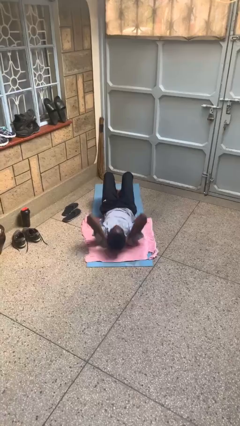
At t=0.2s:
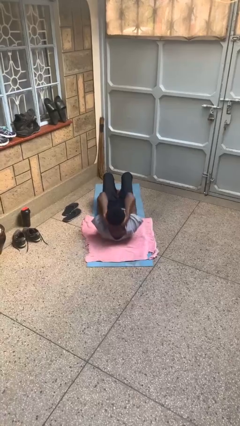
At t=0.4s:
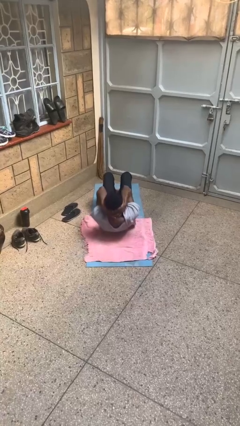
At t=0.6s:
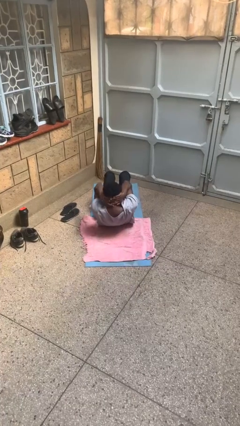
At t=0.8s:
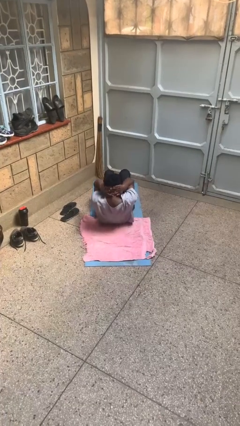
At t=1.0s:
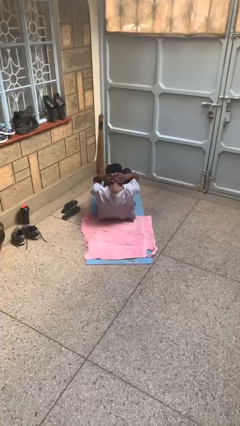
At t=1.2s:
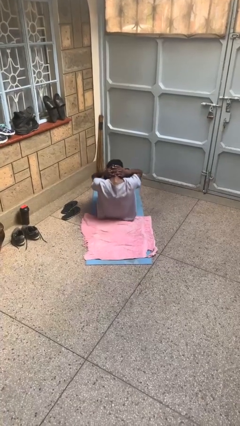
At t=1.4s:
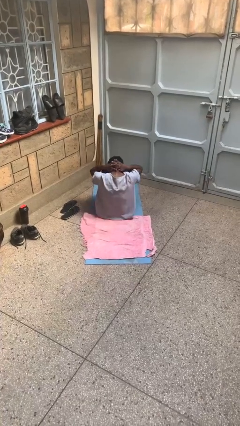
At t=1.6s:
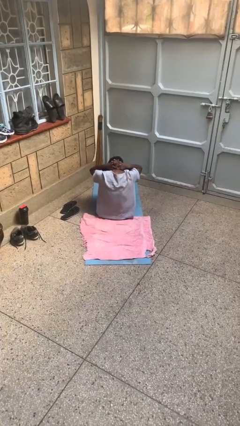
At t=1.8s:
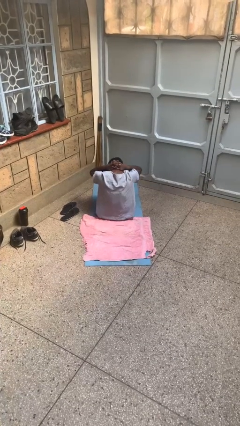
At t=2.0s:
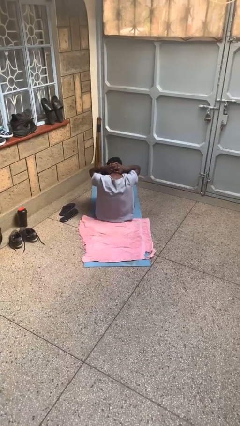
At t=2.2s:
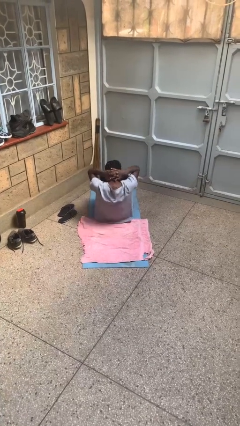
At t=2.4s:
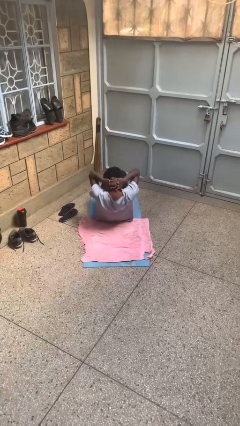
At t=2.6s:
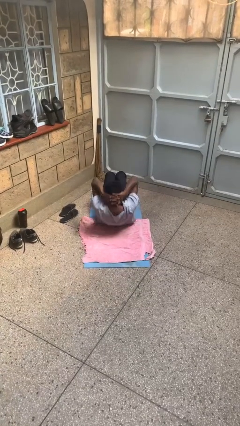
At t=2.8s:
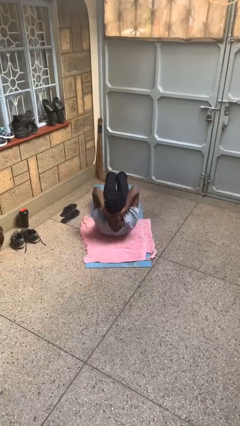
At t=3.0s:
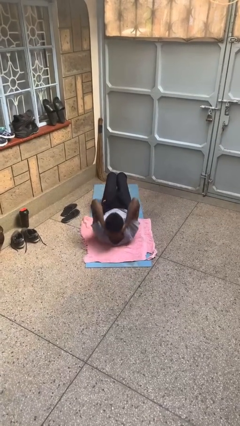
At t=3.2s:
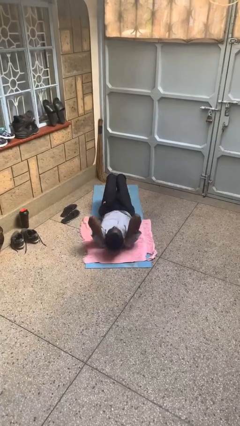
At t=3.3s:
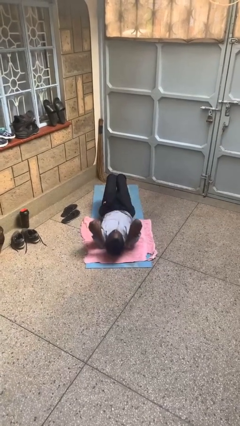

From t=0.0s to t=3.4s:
person exercises with situp

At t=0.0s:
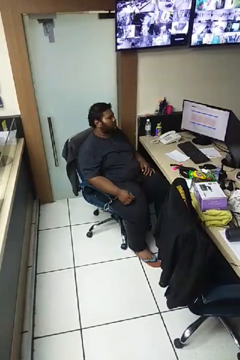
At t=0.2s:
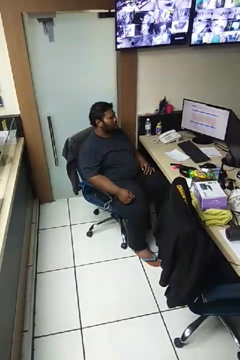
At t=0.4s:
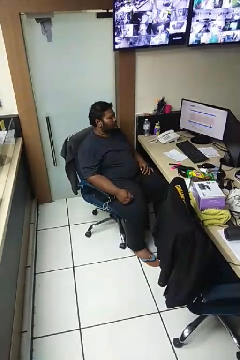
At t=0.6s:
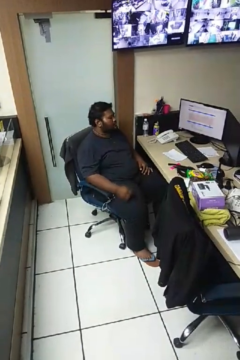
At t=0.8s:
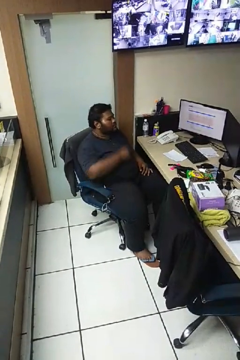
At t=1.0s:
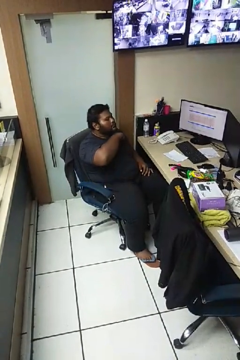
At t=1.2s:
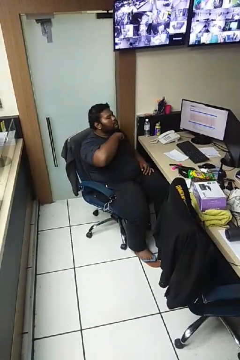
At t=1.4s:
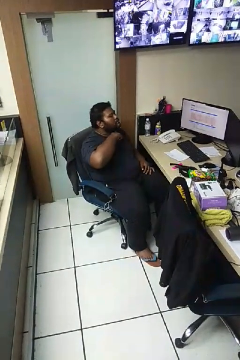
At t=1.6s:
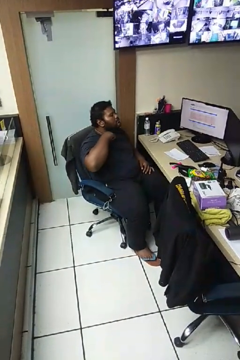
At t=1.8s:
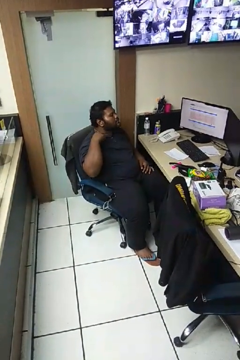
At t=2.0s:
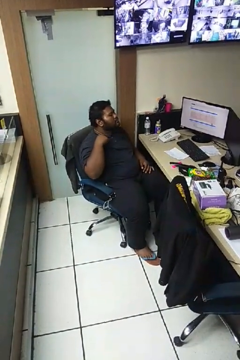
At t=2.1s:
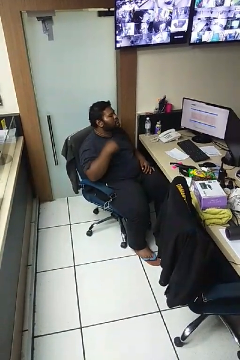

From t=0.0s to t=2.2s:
person gestures cut

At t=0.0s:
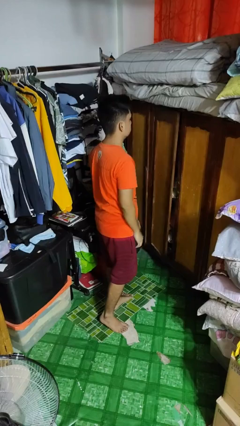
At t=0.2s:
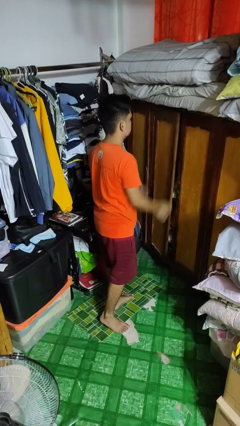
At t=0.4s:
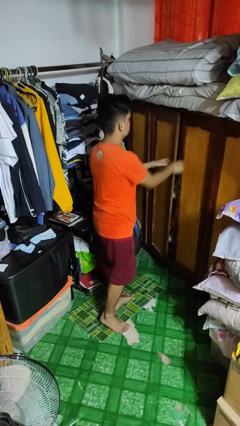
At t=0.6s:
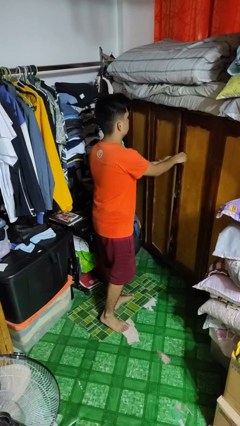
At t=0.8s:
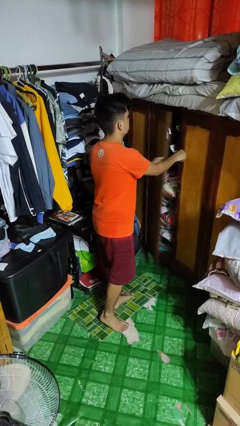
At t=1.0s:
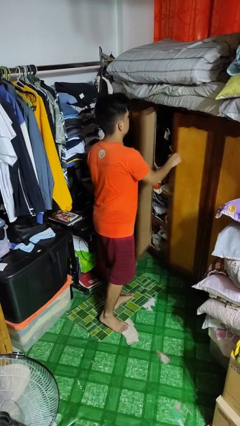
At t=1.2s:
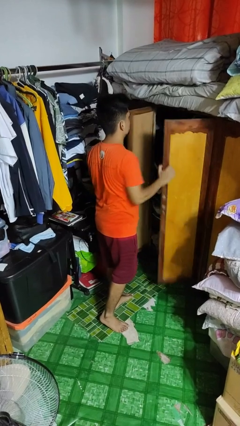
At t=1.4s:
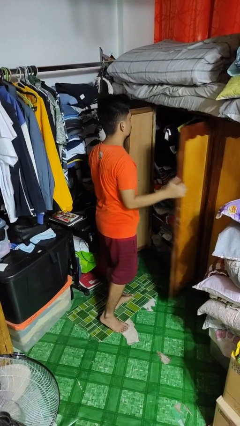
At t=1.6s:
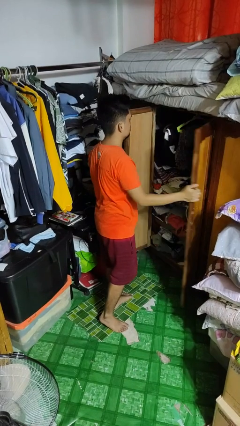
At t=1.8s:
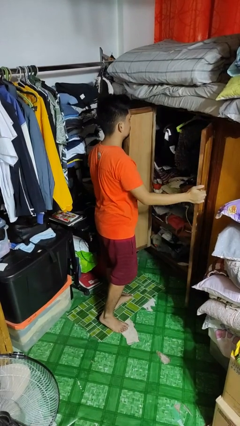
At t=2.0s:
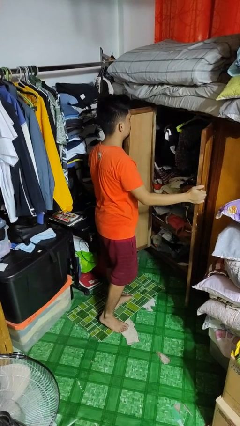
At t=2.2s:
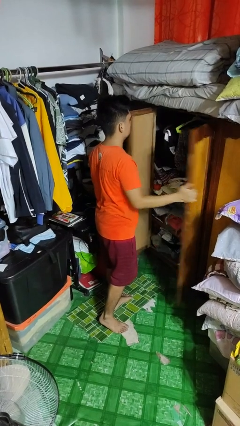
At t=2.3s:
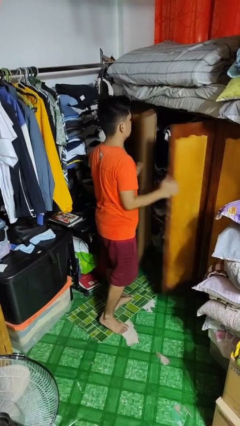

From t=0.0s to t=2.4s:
person opens closet door

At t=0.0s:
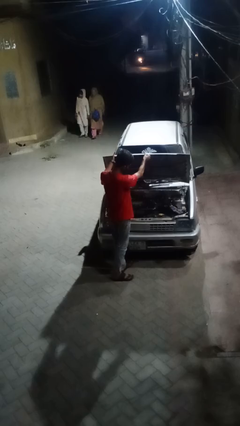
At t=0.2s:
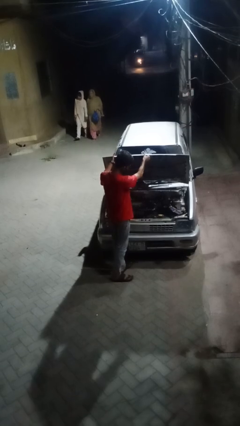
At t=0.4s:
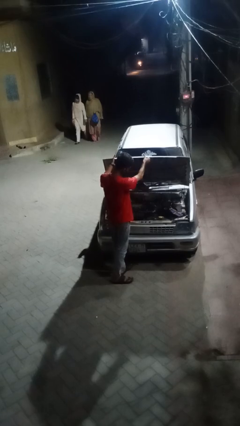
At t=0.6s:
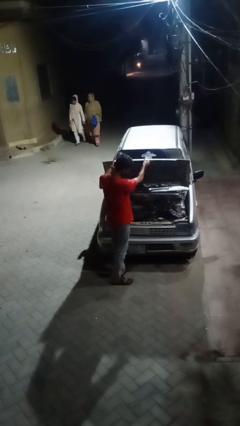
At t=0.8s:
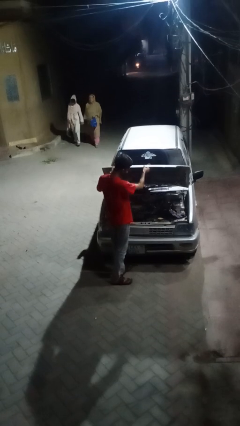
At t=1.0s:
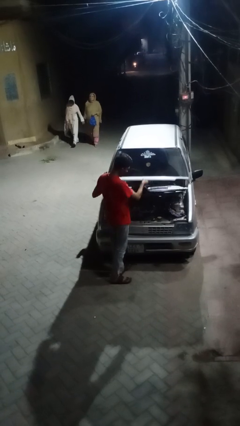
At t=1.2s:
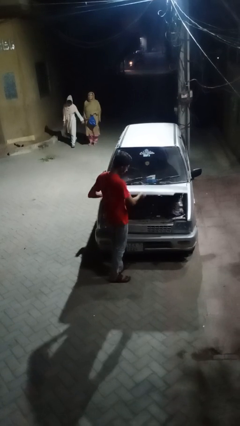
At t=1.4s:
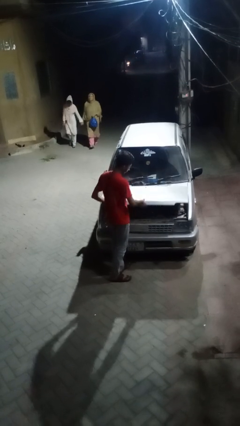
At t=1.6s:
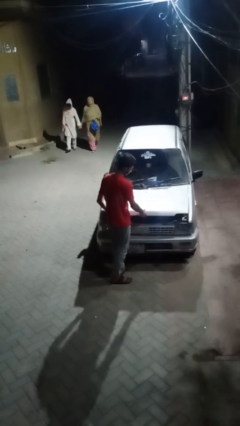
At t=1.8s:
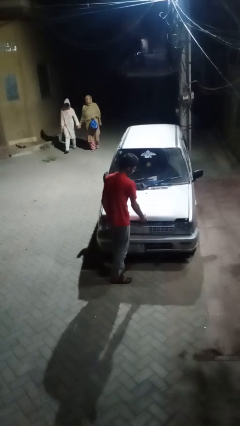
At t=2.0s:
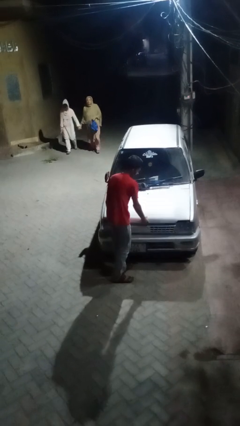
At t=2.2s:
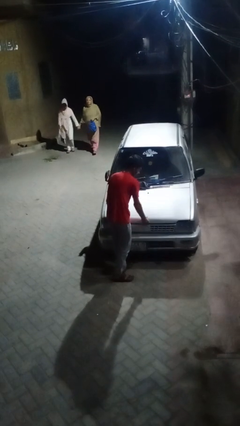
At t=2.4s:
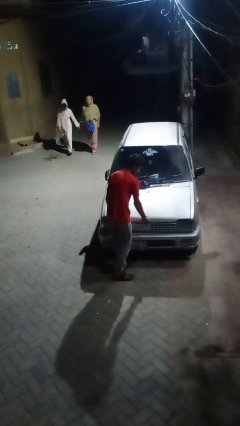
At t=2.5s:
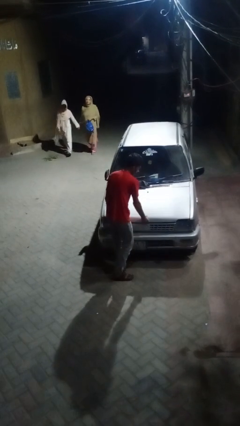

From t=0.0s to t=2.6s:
person closes car hood

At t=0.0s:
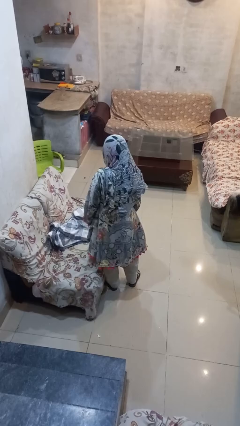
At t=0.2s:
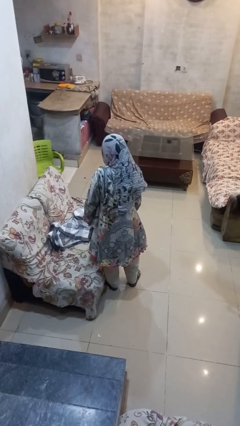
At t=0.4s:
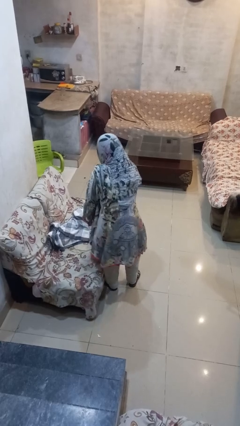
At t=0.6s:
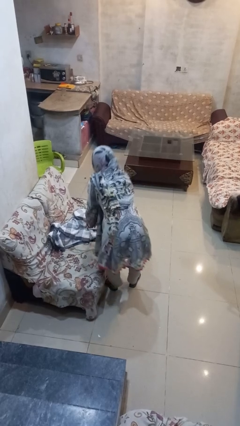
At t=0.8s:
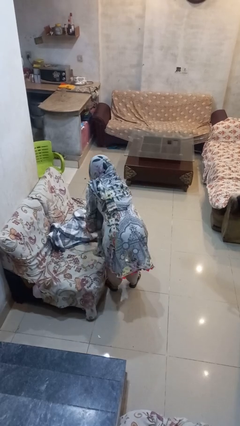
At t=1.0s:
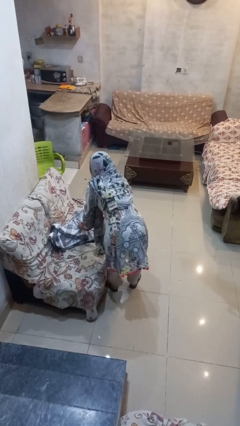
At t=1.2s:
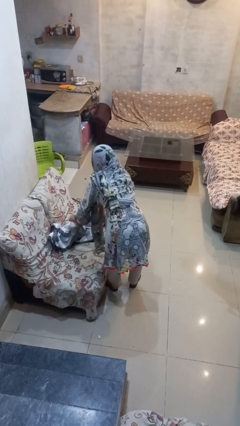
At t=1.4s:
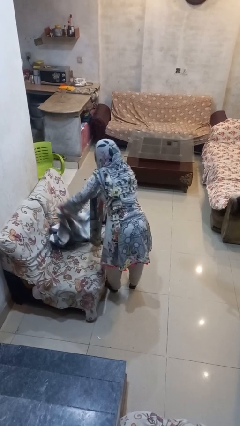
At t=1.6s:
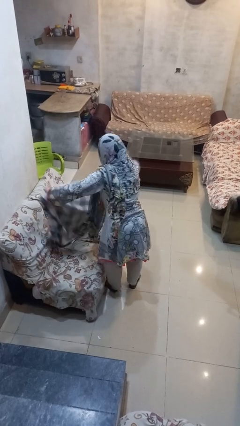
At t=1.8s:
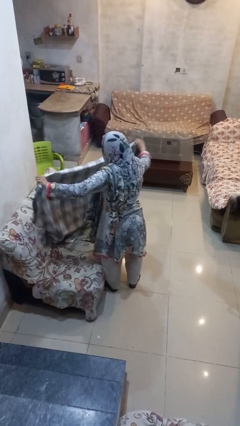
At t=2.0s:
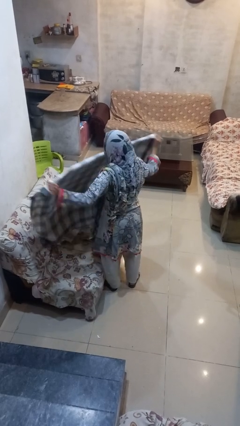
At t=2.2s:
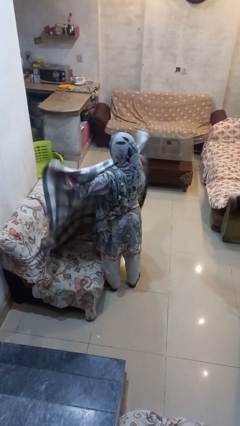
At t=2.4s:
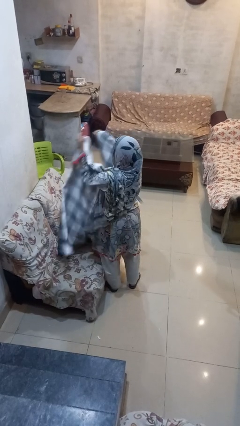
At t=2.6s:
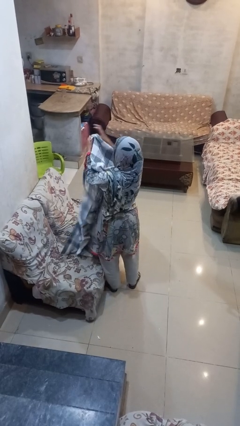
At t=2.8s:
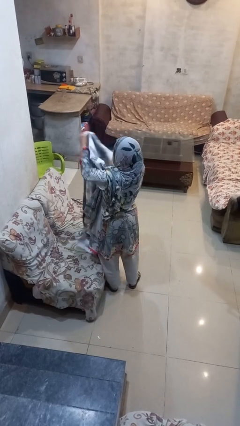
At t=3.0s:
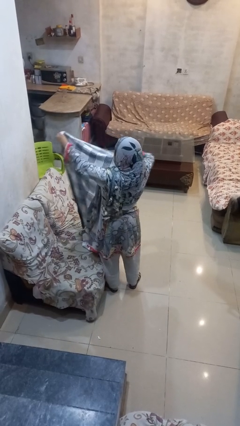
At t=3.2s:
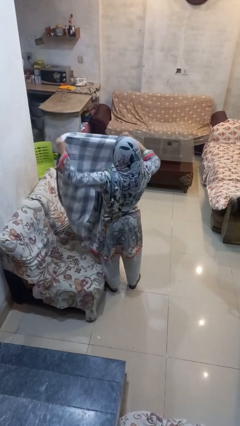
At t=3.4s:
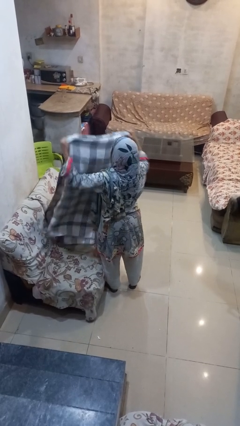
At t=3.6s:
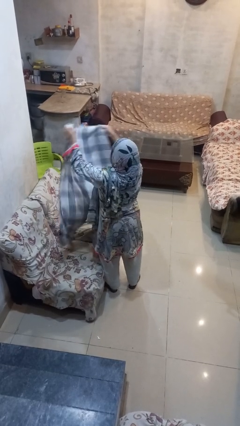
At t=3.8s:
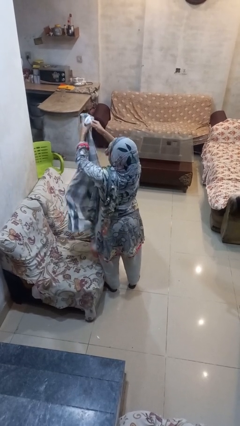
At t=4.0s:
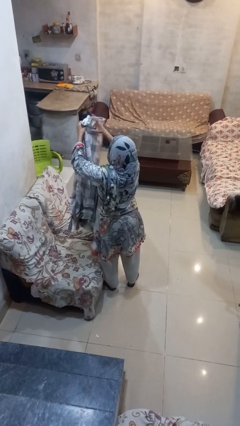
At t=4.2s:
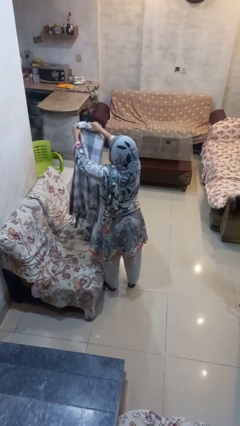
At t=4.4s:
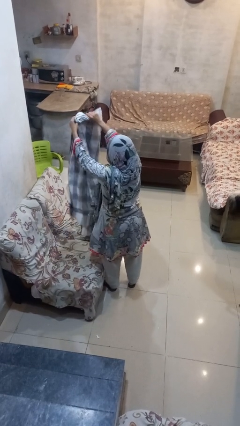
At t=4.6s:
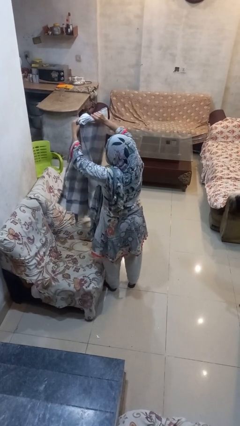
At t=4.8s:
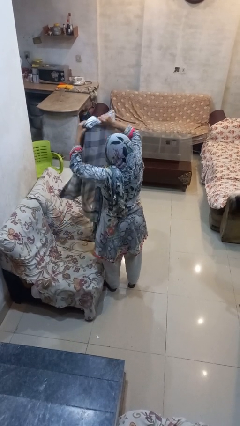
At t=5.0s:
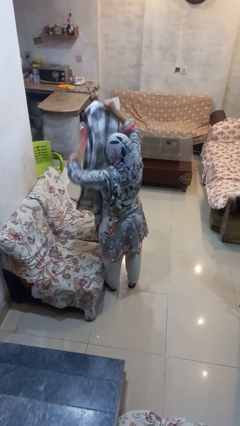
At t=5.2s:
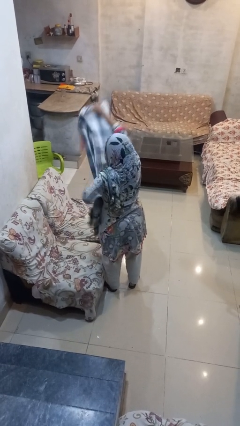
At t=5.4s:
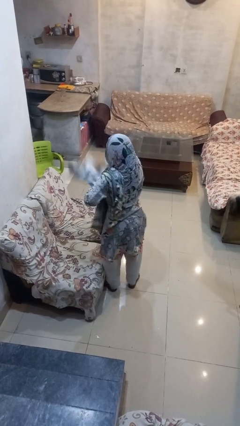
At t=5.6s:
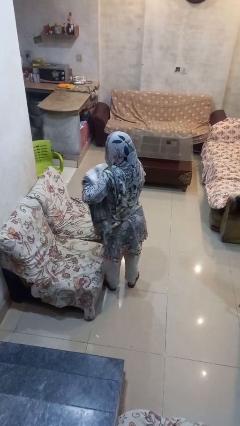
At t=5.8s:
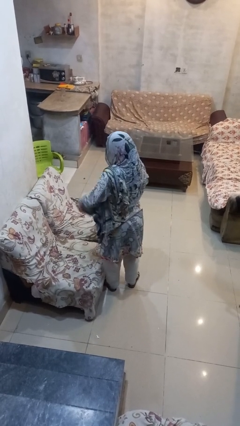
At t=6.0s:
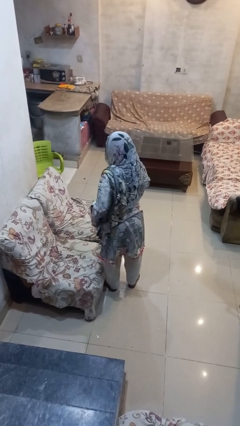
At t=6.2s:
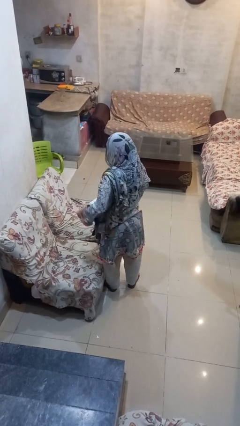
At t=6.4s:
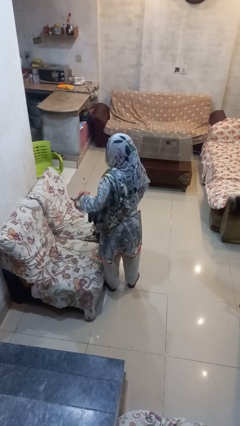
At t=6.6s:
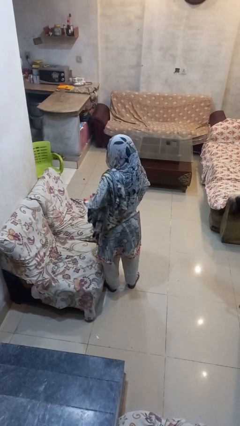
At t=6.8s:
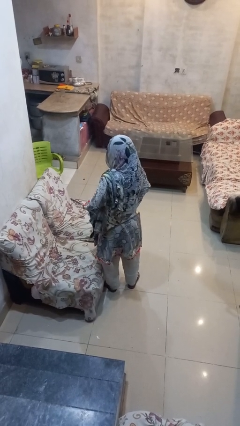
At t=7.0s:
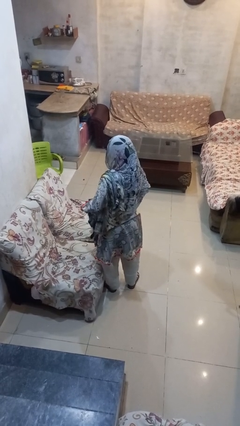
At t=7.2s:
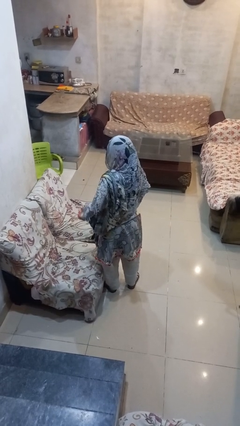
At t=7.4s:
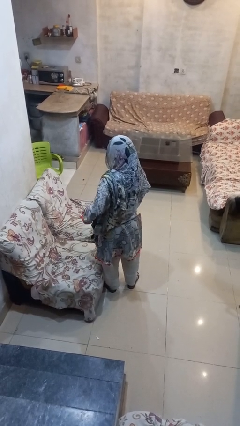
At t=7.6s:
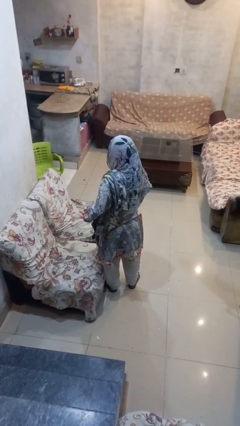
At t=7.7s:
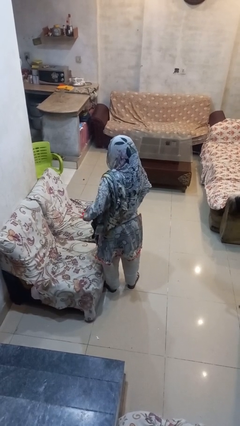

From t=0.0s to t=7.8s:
person folds blanket
